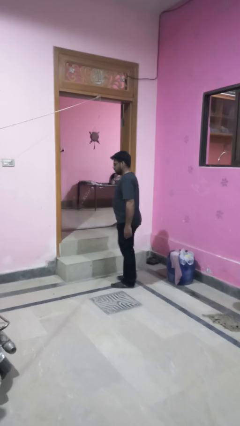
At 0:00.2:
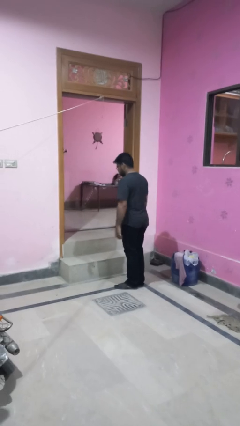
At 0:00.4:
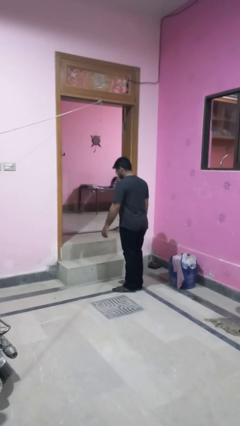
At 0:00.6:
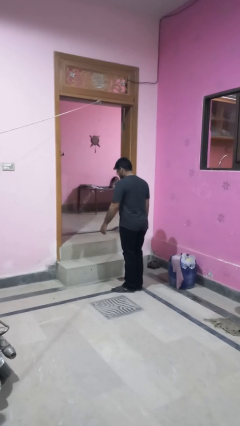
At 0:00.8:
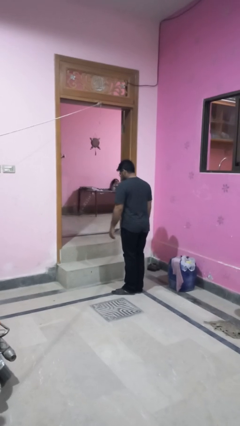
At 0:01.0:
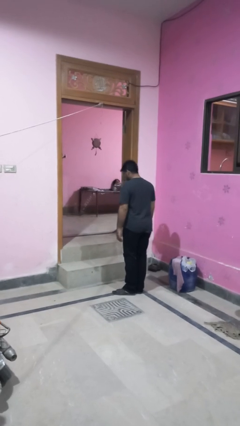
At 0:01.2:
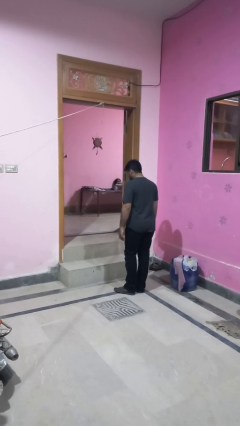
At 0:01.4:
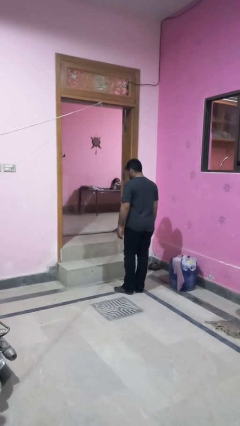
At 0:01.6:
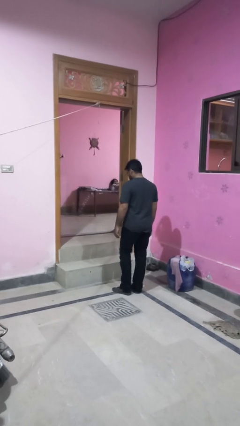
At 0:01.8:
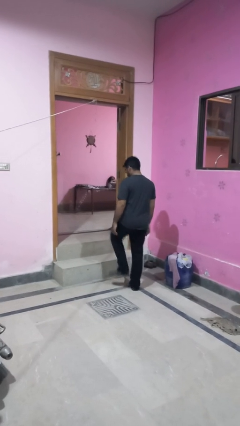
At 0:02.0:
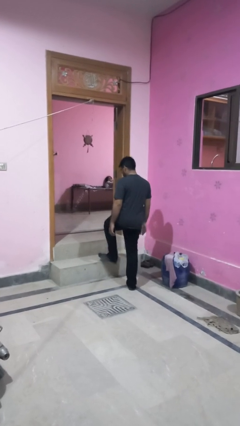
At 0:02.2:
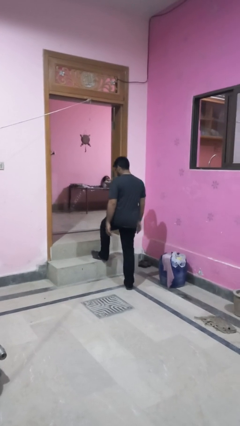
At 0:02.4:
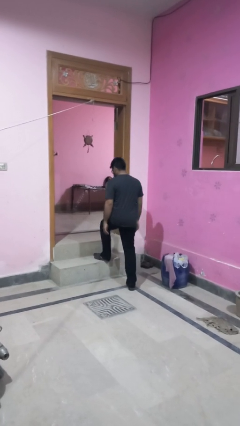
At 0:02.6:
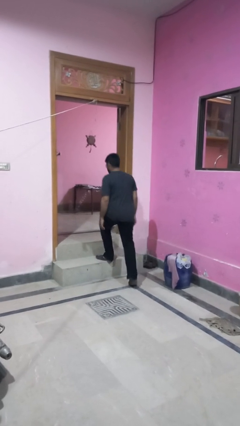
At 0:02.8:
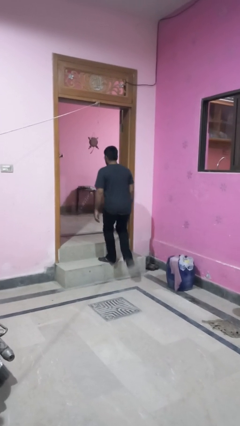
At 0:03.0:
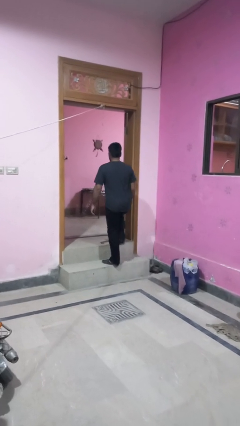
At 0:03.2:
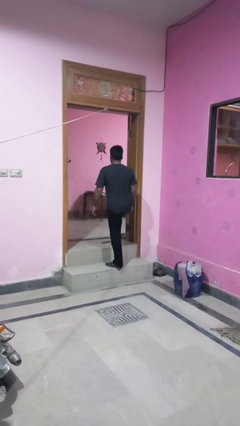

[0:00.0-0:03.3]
person puts on necklace

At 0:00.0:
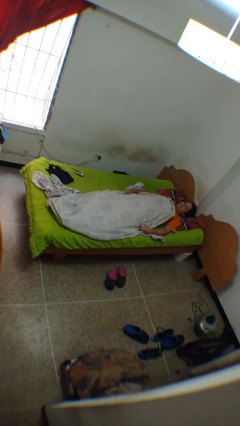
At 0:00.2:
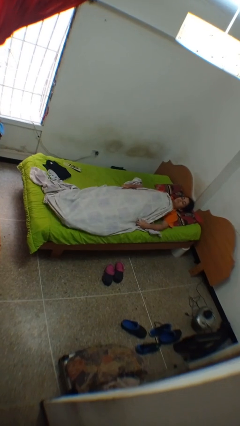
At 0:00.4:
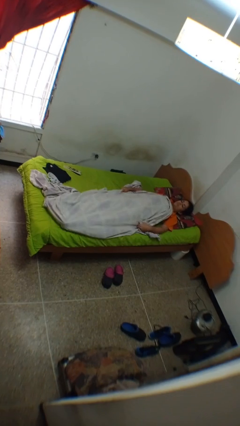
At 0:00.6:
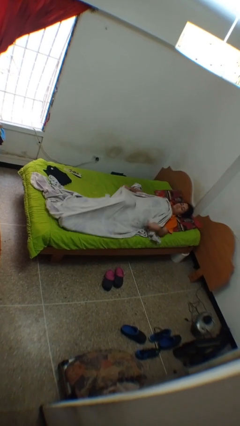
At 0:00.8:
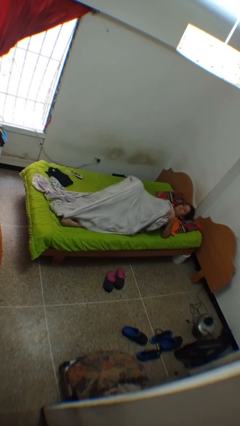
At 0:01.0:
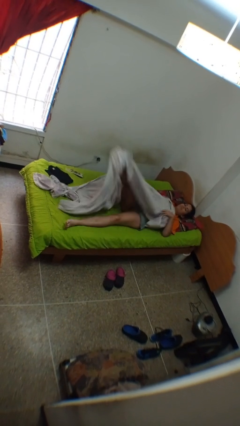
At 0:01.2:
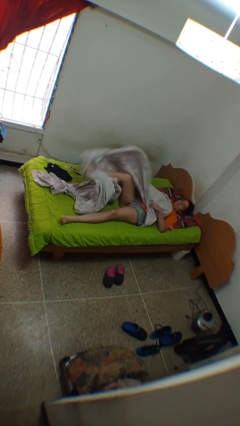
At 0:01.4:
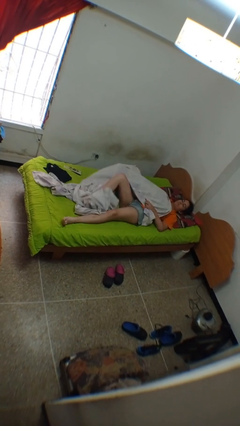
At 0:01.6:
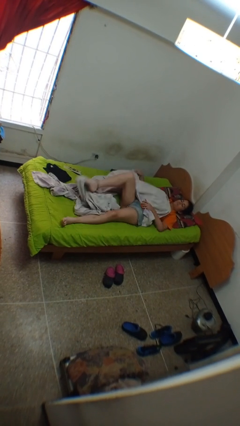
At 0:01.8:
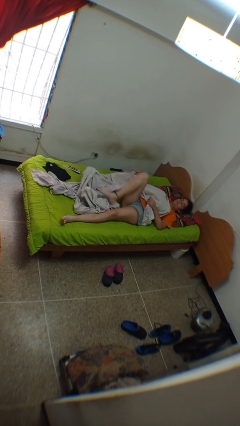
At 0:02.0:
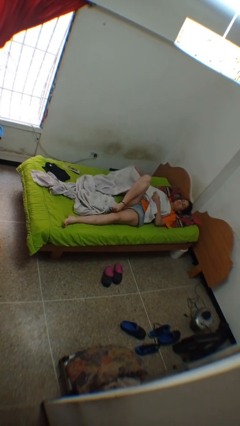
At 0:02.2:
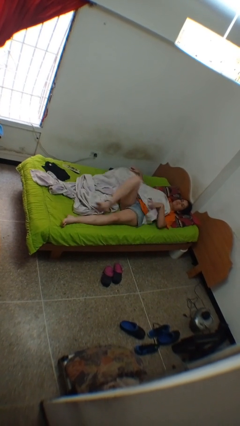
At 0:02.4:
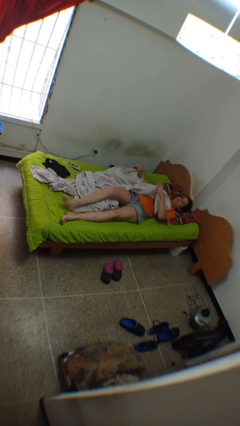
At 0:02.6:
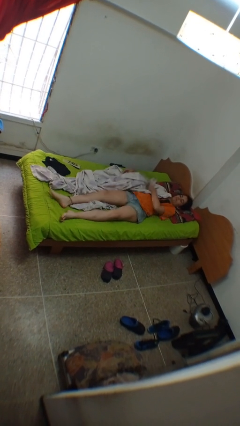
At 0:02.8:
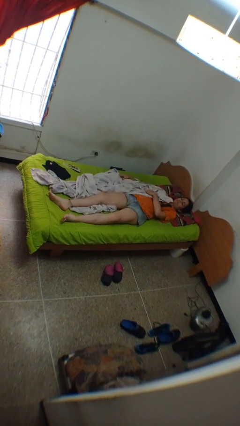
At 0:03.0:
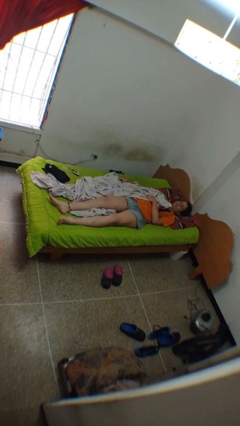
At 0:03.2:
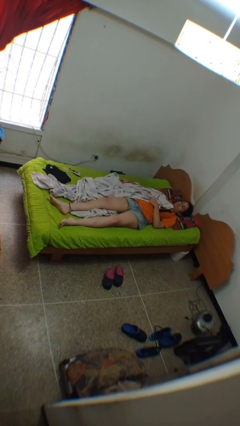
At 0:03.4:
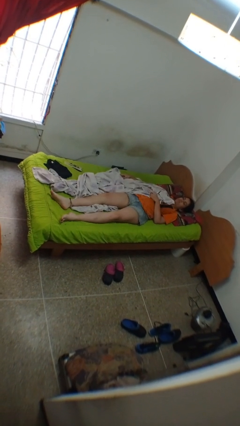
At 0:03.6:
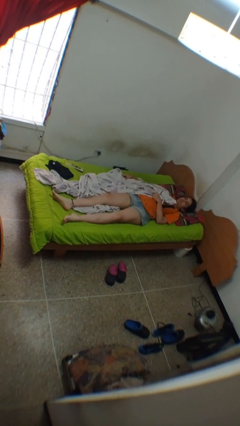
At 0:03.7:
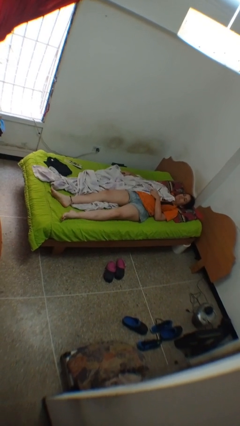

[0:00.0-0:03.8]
person uncovers with bedsheets

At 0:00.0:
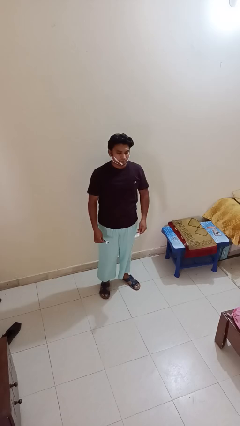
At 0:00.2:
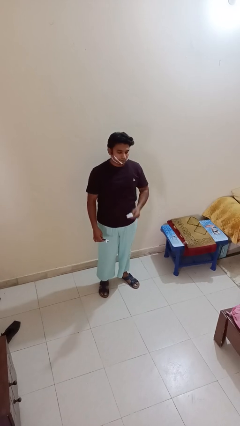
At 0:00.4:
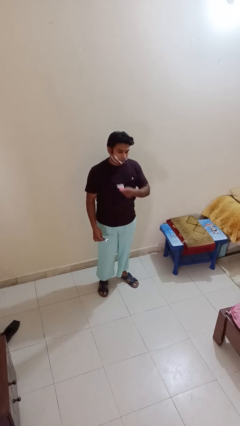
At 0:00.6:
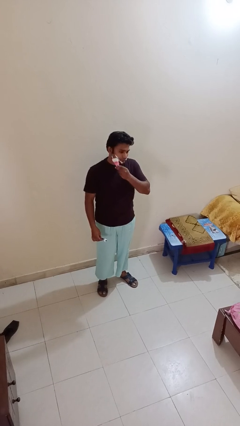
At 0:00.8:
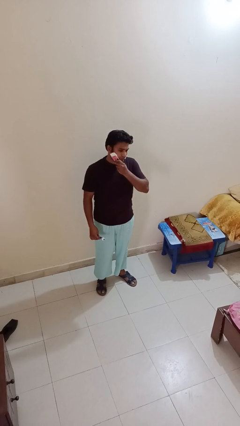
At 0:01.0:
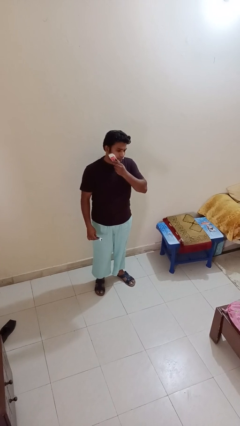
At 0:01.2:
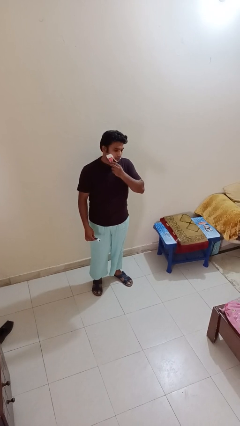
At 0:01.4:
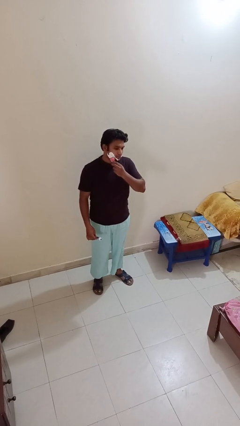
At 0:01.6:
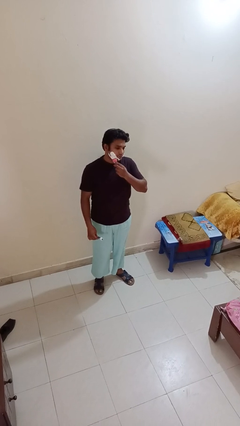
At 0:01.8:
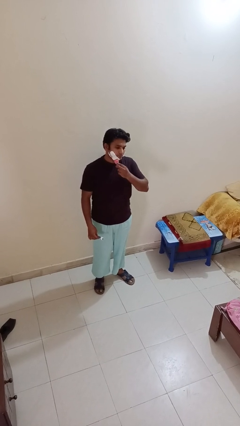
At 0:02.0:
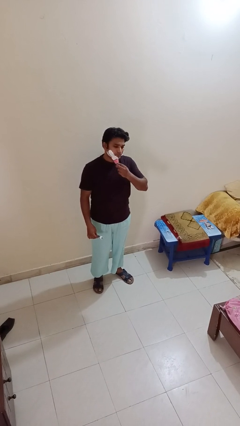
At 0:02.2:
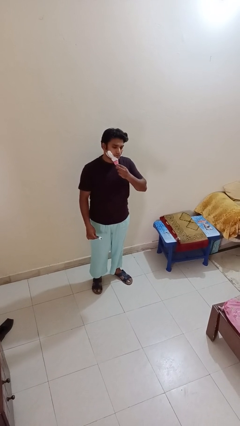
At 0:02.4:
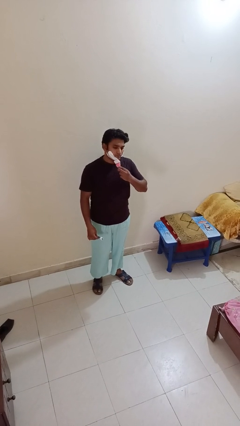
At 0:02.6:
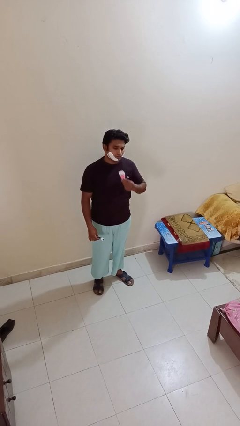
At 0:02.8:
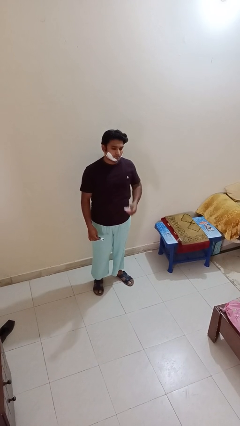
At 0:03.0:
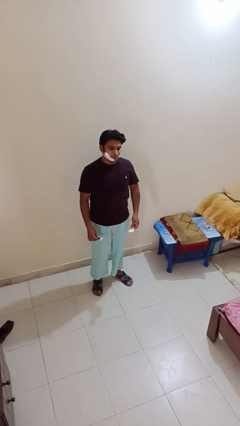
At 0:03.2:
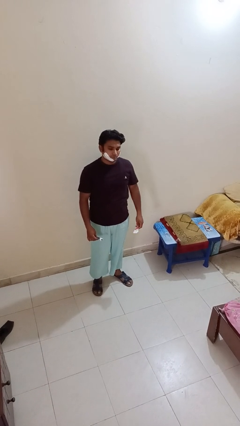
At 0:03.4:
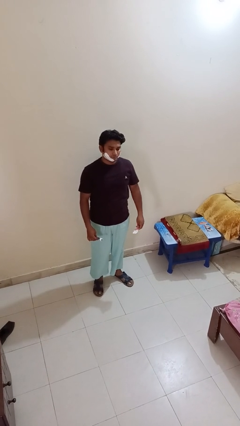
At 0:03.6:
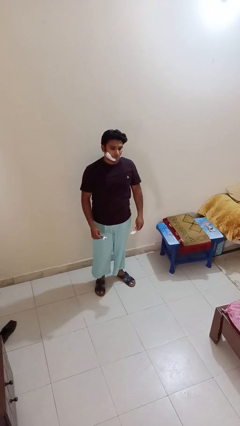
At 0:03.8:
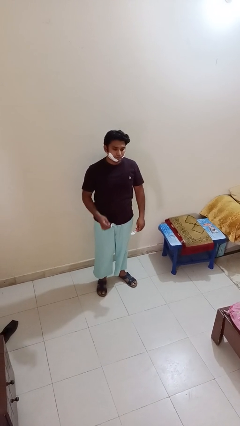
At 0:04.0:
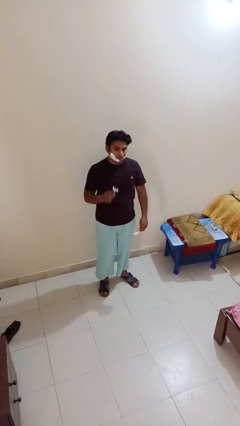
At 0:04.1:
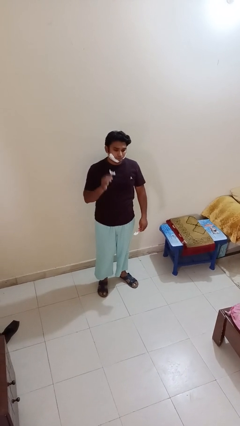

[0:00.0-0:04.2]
person applies shaving cream

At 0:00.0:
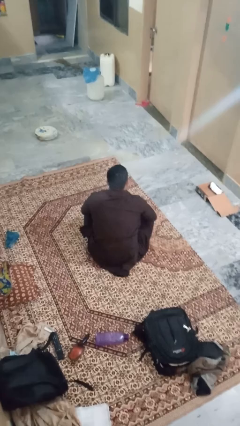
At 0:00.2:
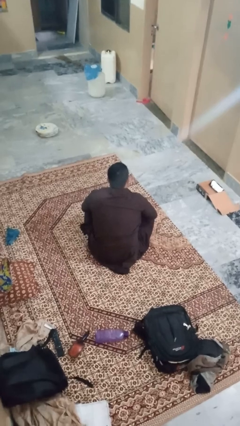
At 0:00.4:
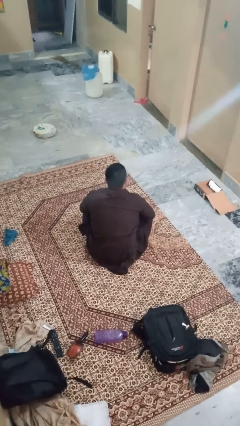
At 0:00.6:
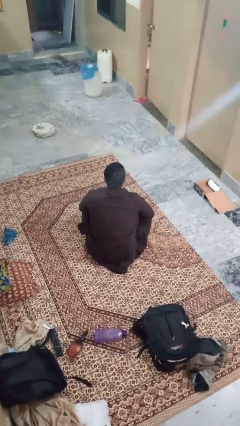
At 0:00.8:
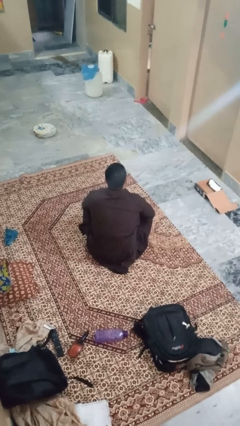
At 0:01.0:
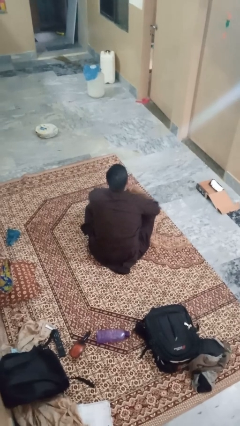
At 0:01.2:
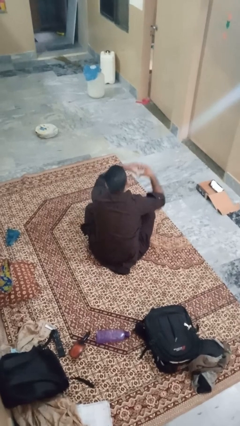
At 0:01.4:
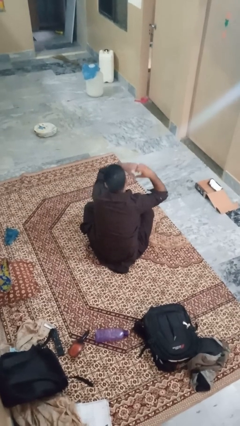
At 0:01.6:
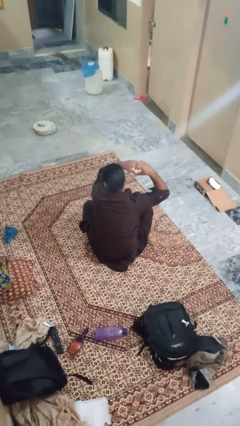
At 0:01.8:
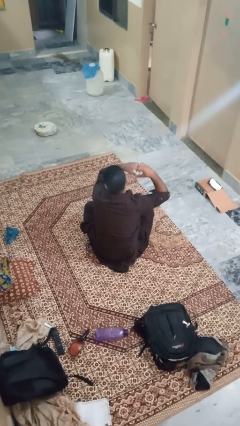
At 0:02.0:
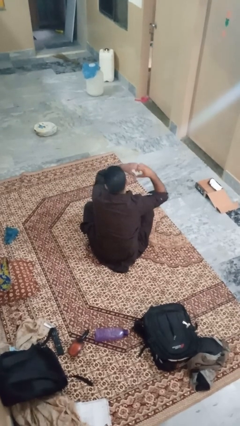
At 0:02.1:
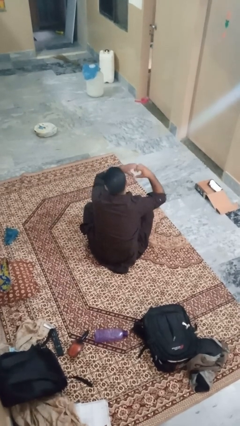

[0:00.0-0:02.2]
person gestures heart

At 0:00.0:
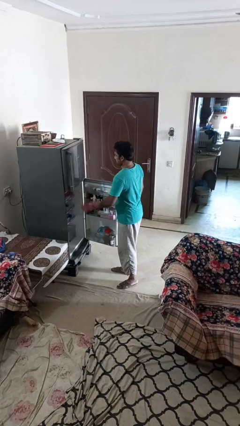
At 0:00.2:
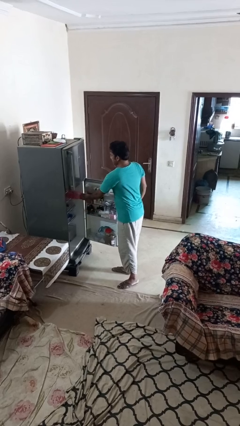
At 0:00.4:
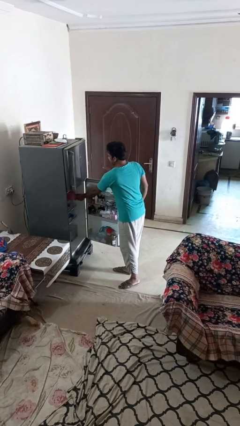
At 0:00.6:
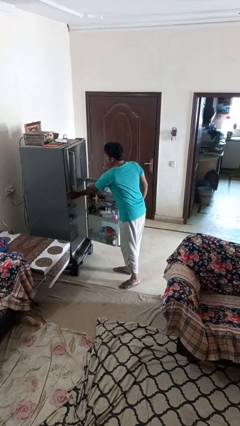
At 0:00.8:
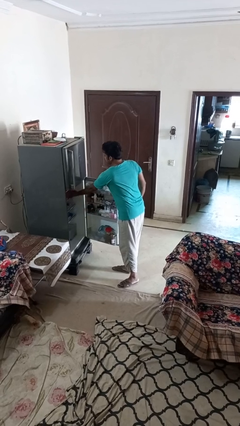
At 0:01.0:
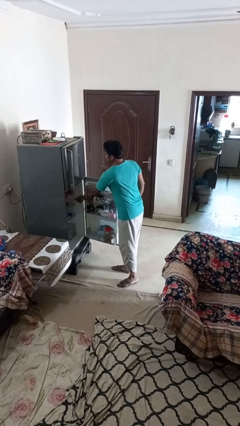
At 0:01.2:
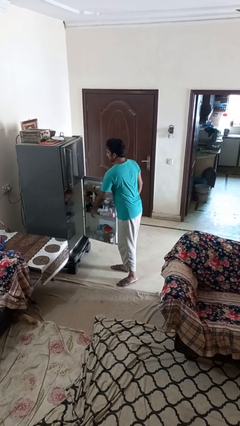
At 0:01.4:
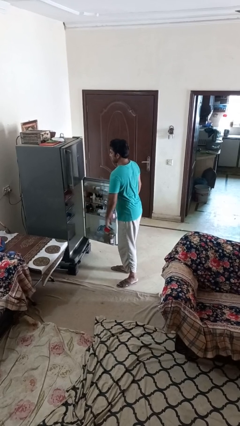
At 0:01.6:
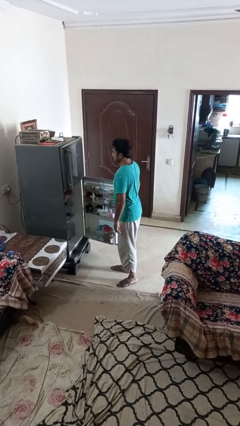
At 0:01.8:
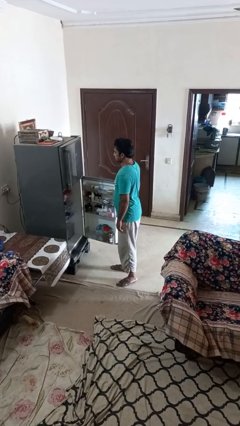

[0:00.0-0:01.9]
person puts object into refrigerator

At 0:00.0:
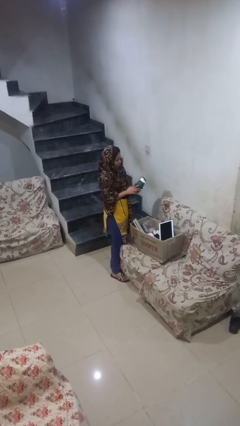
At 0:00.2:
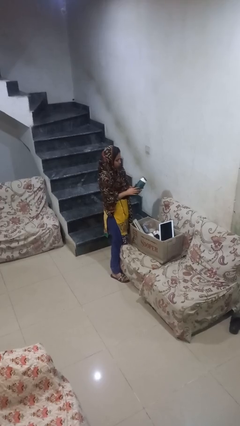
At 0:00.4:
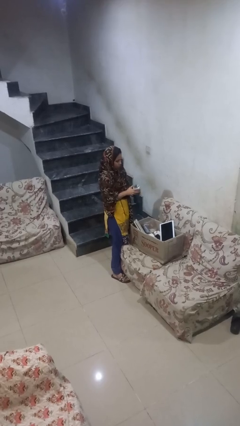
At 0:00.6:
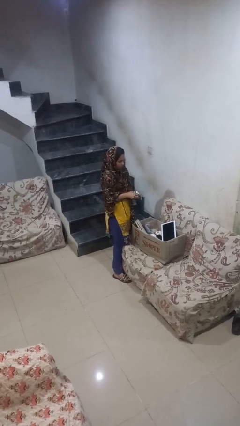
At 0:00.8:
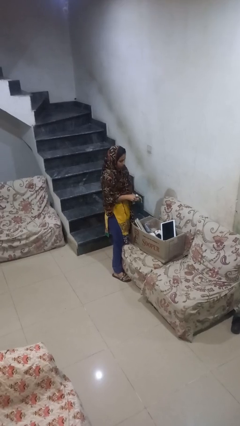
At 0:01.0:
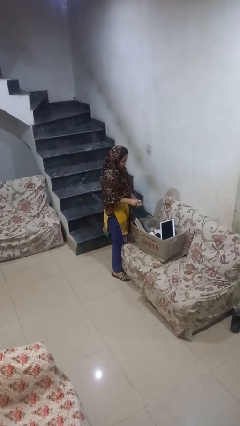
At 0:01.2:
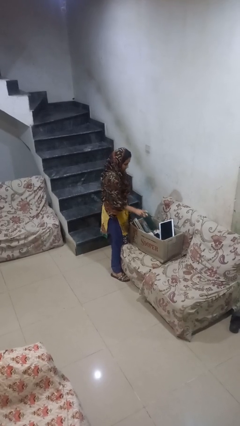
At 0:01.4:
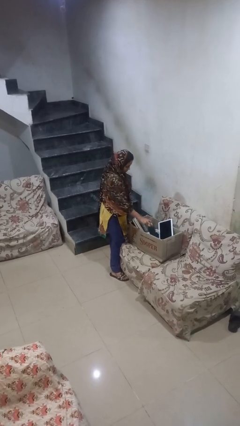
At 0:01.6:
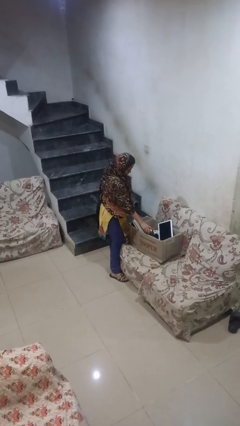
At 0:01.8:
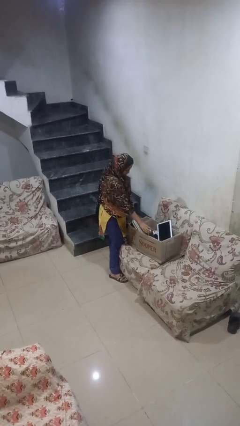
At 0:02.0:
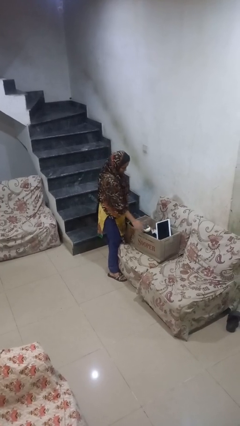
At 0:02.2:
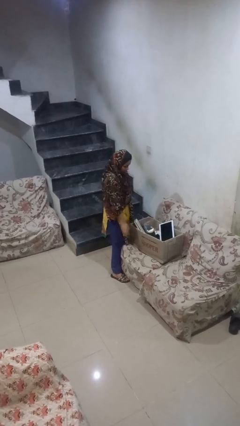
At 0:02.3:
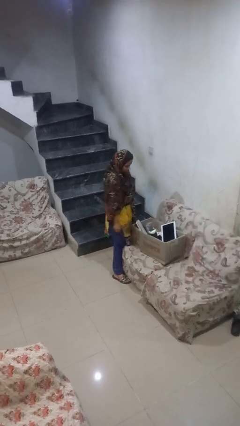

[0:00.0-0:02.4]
person puts object into box
